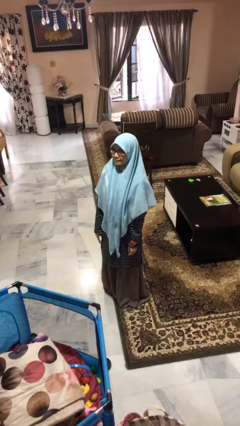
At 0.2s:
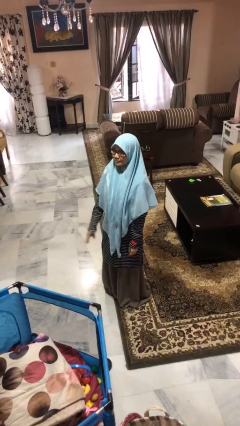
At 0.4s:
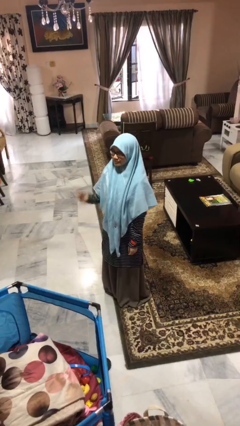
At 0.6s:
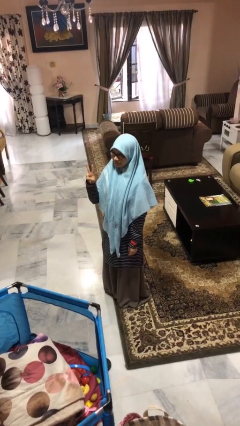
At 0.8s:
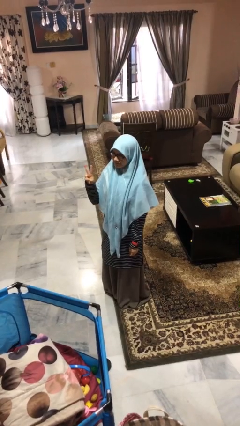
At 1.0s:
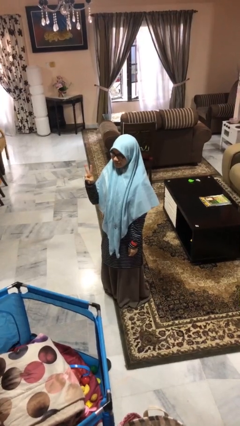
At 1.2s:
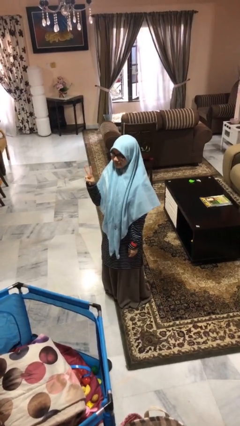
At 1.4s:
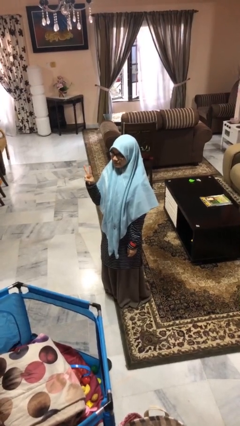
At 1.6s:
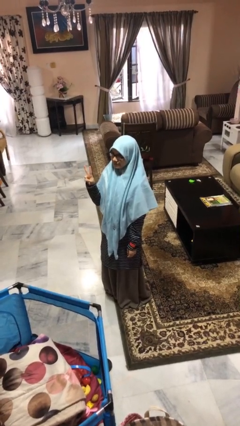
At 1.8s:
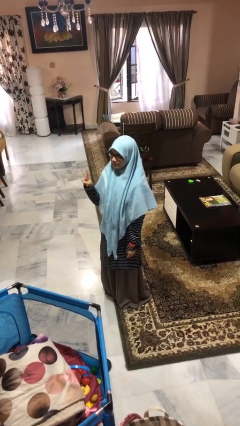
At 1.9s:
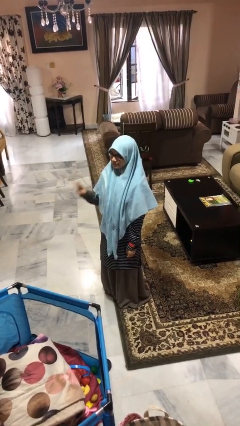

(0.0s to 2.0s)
person gestures peace

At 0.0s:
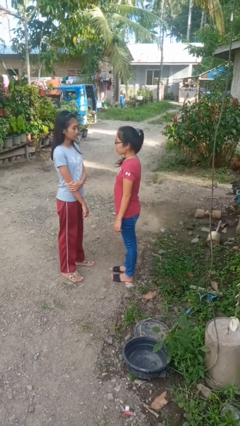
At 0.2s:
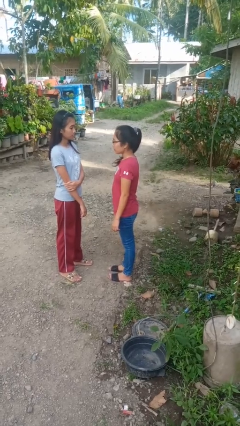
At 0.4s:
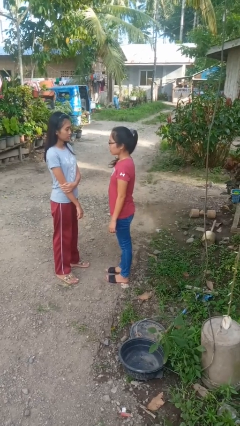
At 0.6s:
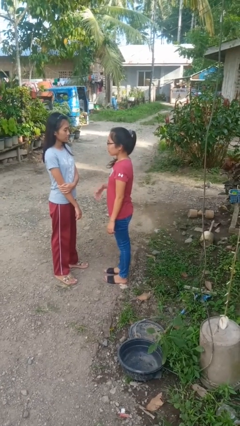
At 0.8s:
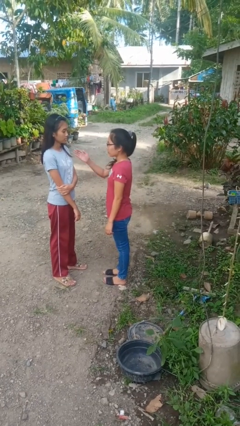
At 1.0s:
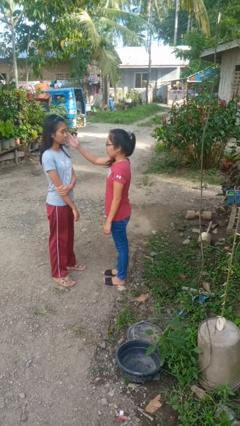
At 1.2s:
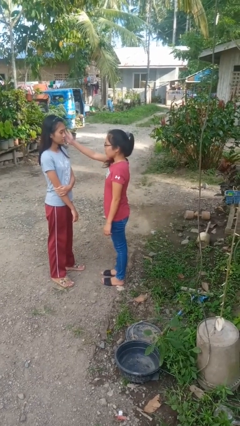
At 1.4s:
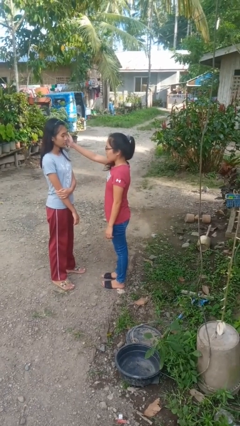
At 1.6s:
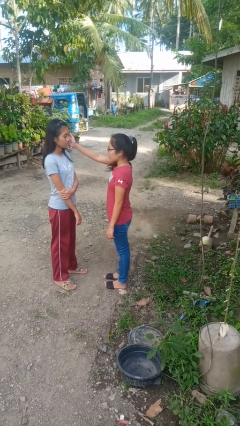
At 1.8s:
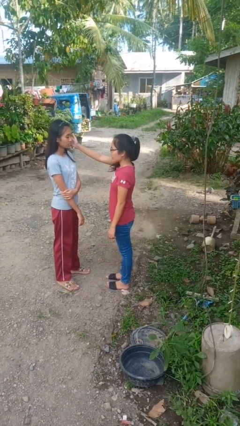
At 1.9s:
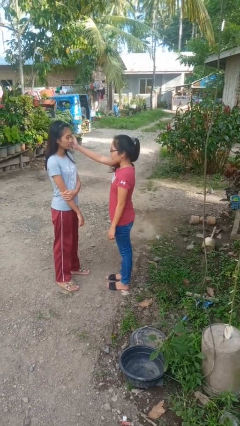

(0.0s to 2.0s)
person touches face of person

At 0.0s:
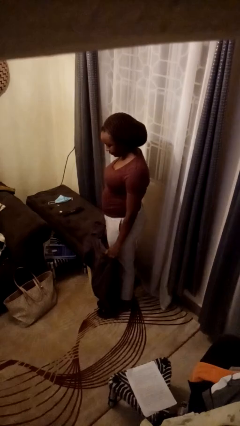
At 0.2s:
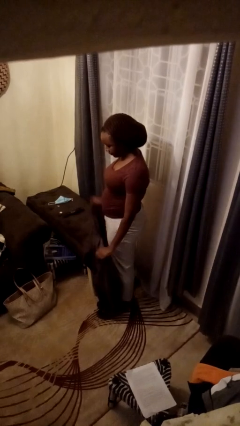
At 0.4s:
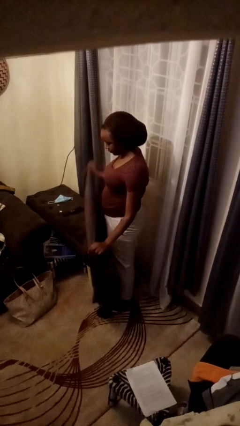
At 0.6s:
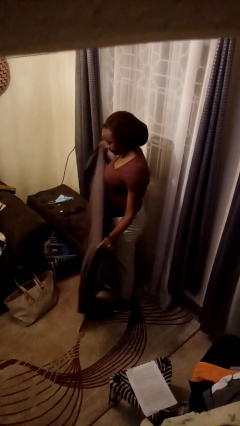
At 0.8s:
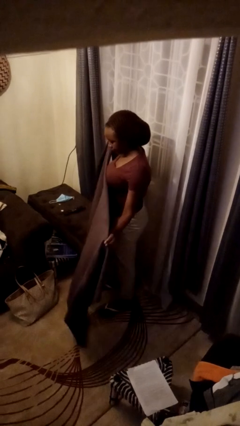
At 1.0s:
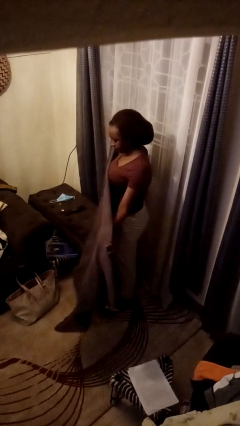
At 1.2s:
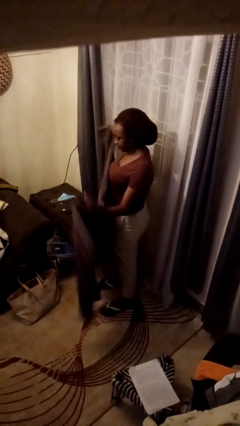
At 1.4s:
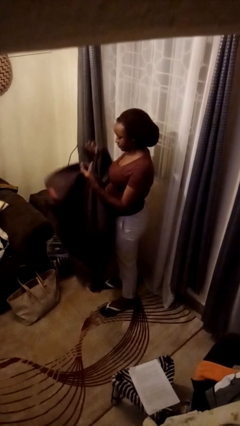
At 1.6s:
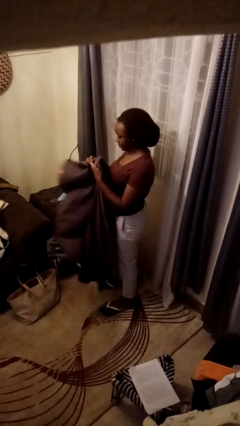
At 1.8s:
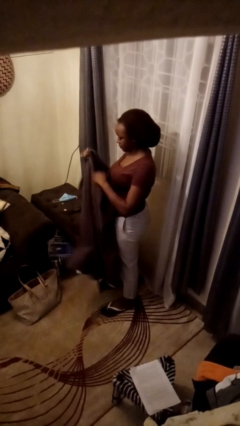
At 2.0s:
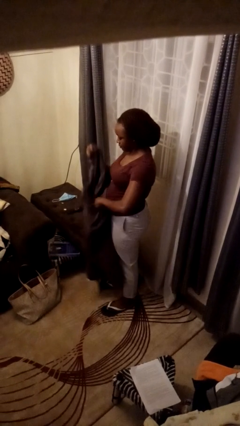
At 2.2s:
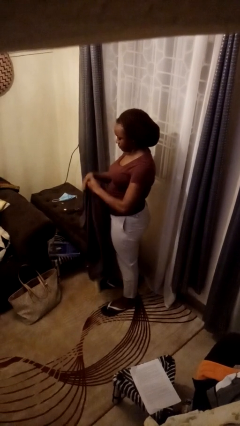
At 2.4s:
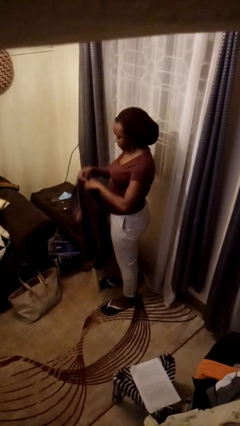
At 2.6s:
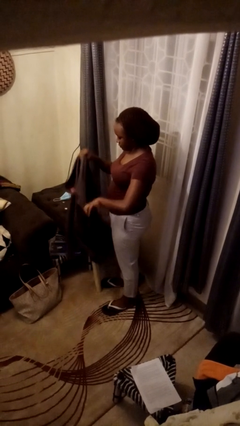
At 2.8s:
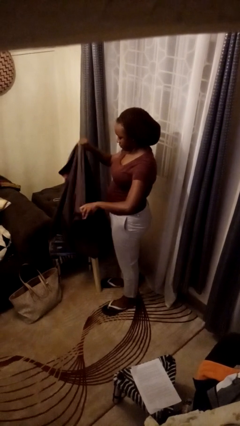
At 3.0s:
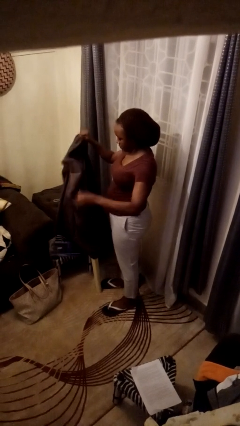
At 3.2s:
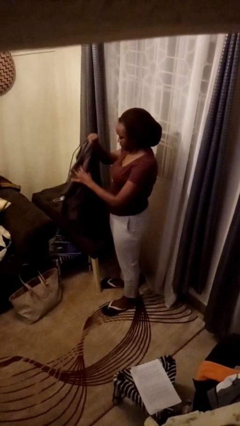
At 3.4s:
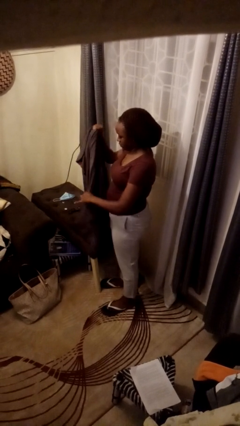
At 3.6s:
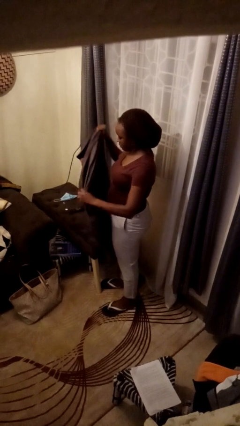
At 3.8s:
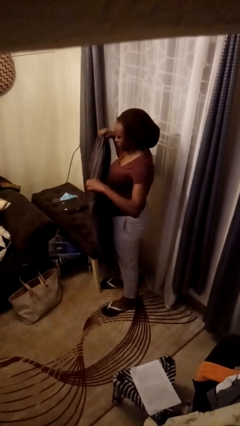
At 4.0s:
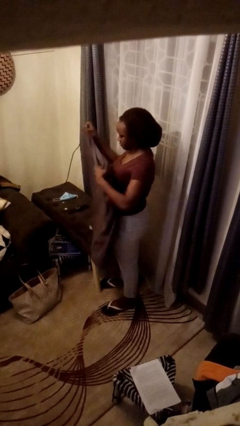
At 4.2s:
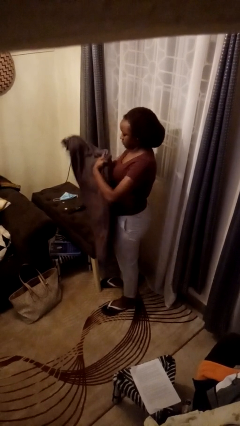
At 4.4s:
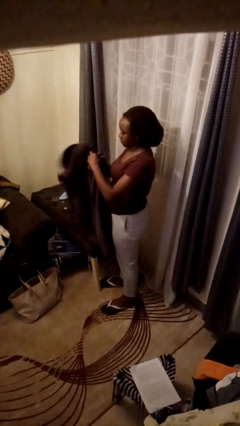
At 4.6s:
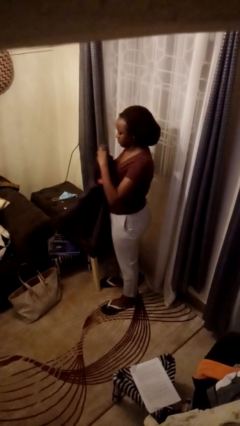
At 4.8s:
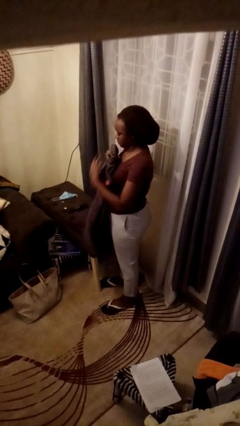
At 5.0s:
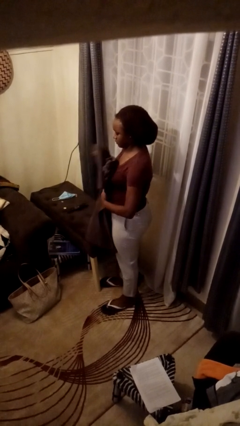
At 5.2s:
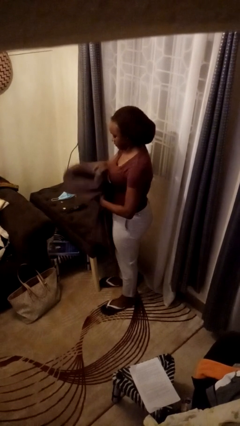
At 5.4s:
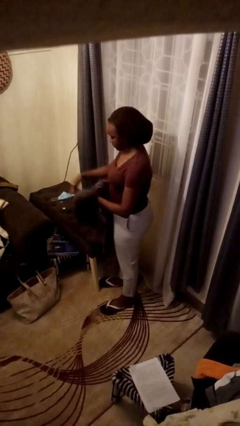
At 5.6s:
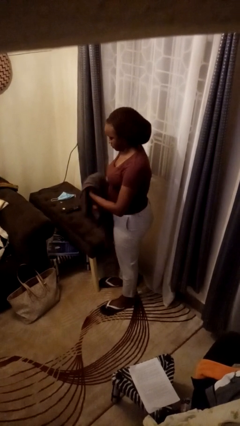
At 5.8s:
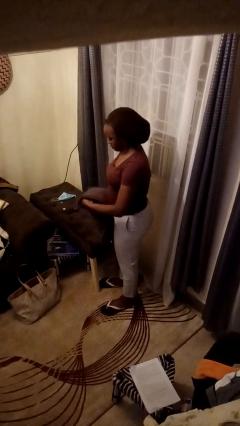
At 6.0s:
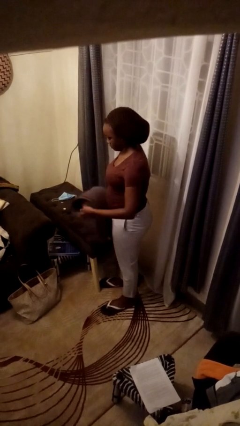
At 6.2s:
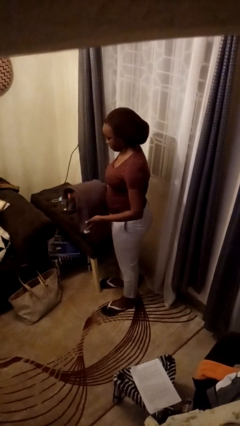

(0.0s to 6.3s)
person folds blanket

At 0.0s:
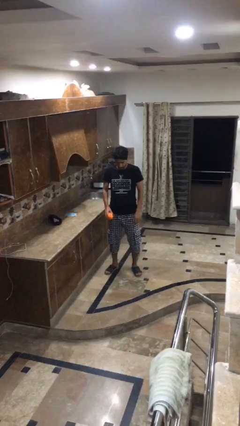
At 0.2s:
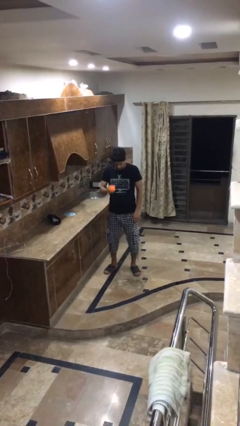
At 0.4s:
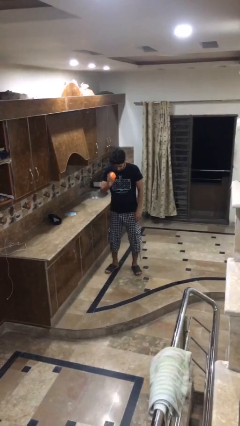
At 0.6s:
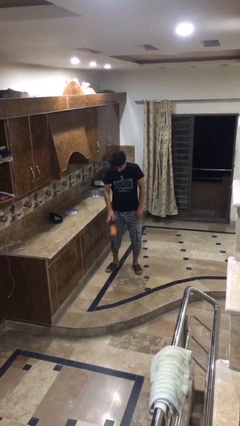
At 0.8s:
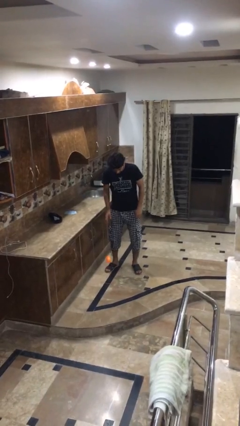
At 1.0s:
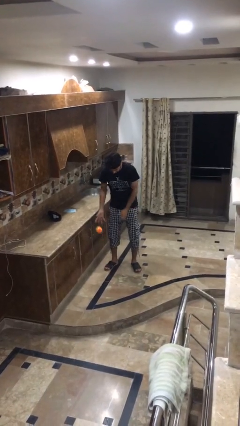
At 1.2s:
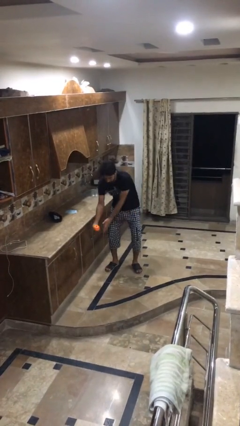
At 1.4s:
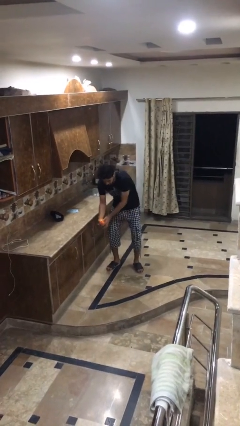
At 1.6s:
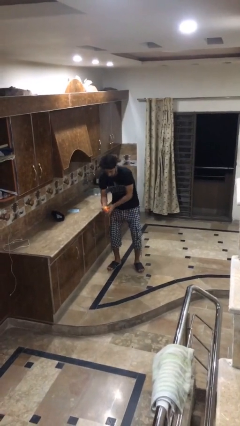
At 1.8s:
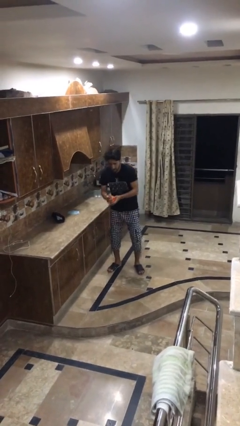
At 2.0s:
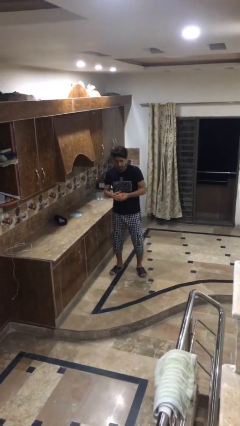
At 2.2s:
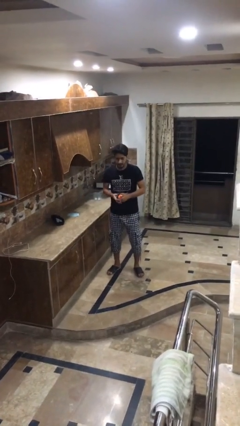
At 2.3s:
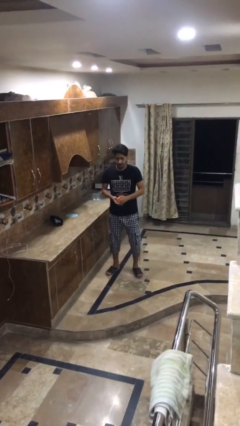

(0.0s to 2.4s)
person bounces ball on floor

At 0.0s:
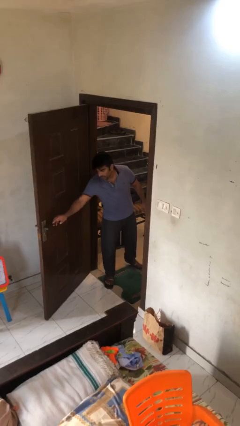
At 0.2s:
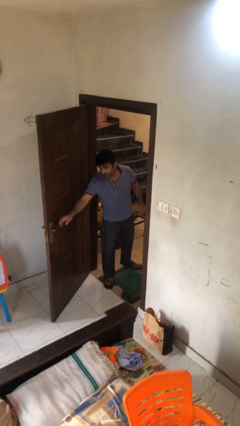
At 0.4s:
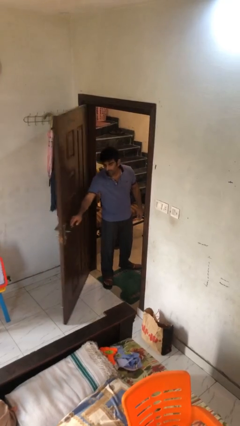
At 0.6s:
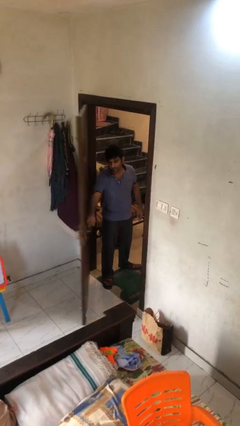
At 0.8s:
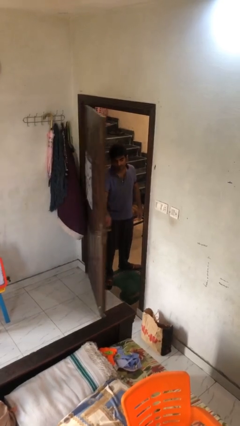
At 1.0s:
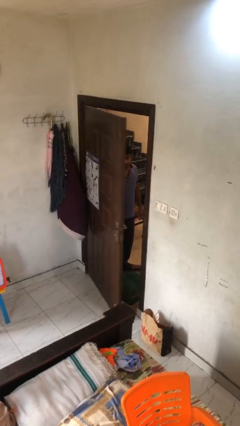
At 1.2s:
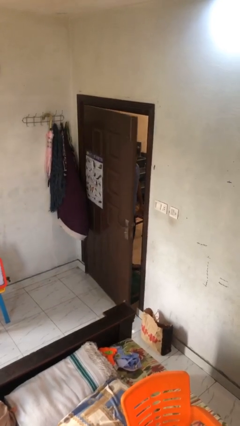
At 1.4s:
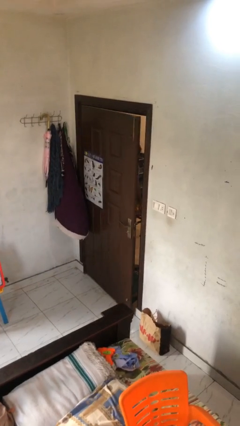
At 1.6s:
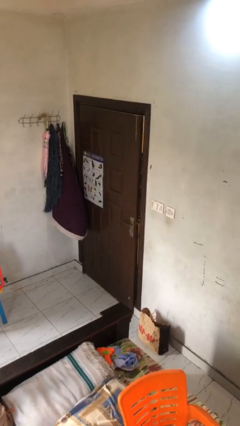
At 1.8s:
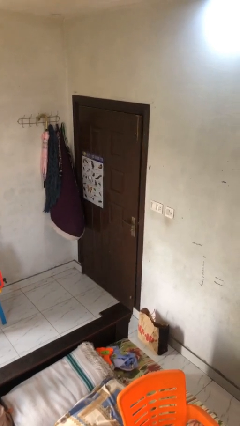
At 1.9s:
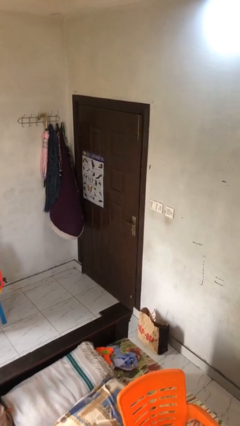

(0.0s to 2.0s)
person closes facility door

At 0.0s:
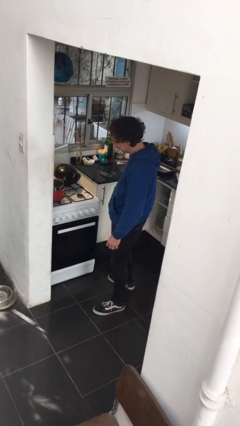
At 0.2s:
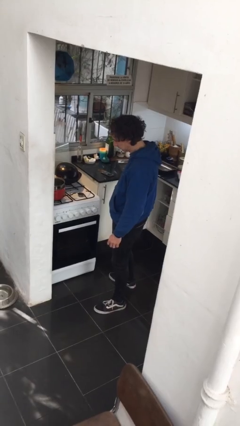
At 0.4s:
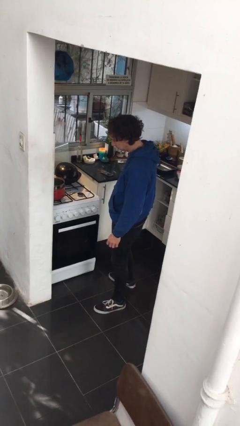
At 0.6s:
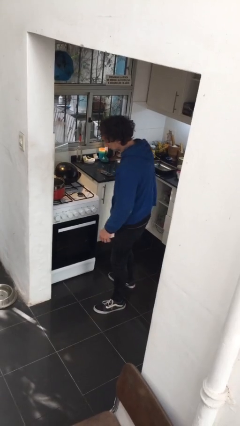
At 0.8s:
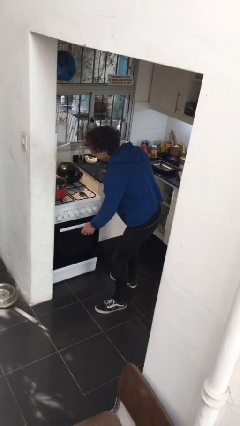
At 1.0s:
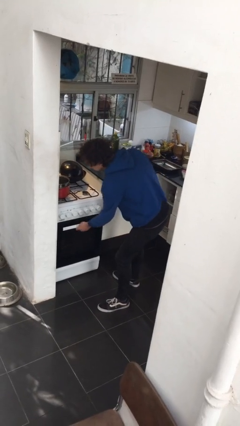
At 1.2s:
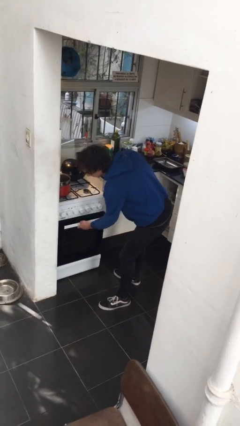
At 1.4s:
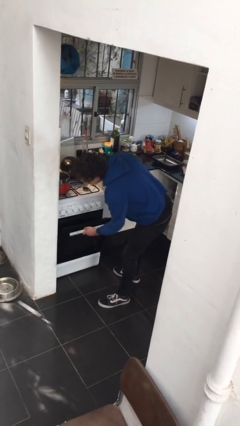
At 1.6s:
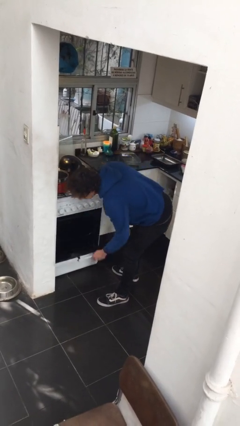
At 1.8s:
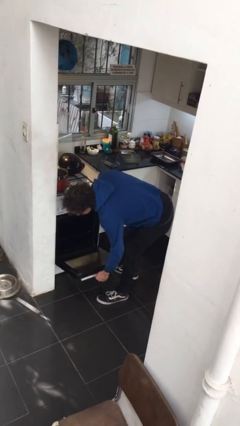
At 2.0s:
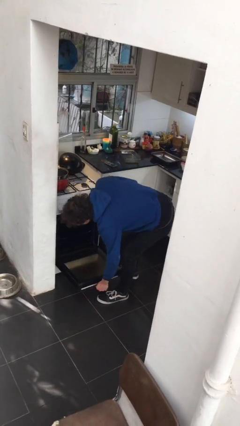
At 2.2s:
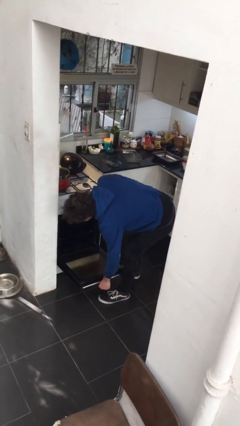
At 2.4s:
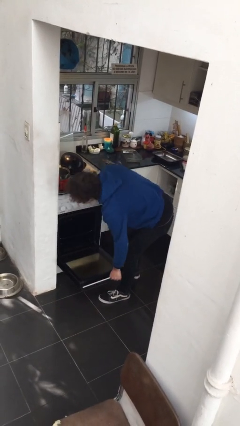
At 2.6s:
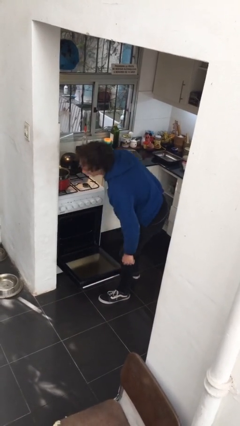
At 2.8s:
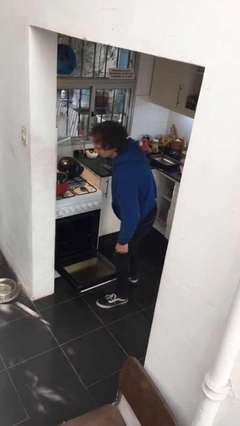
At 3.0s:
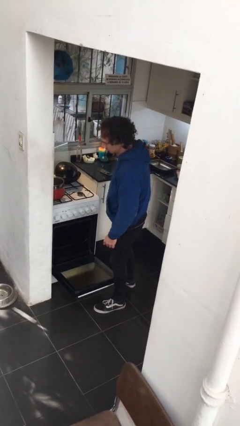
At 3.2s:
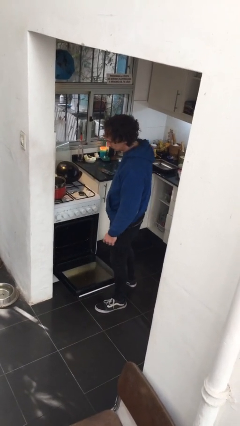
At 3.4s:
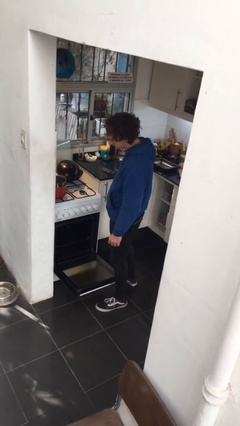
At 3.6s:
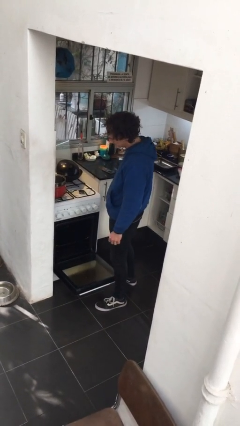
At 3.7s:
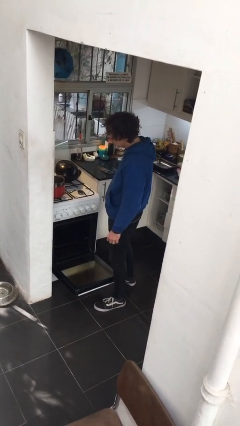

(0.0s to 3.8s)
person opens oven door
